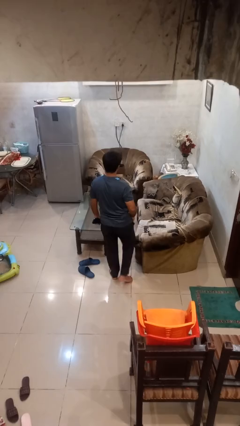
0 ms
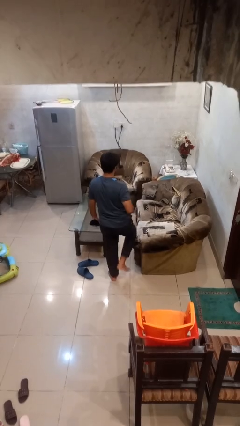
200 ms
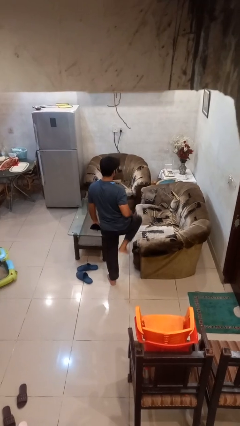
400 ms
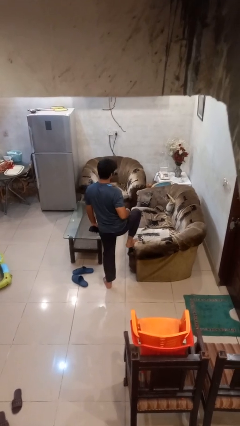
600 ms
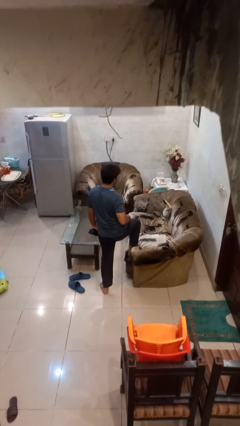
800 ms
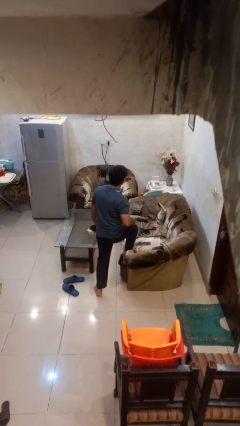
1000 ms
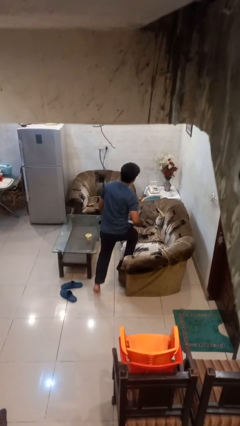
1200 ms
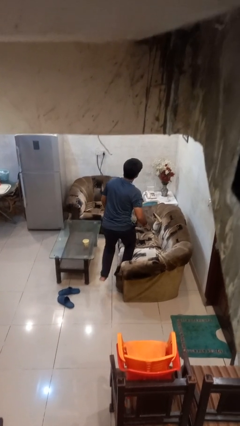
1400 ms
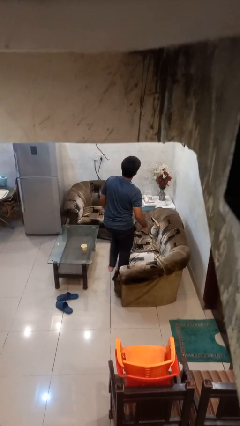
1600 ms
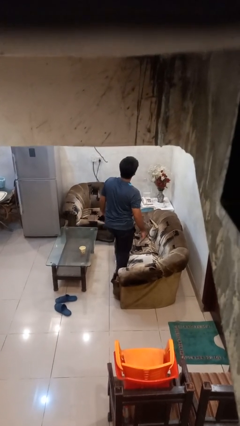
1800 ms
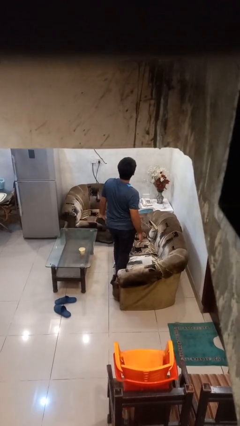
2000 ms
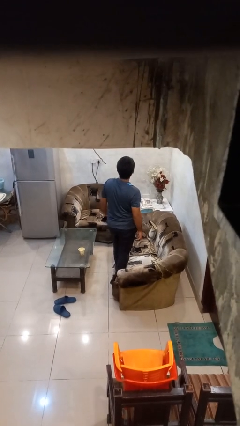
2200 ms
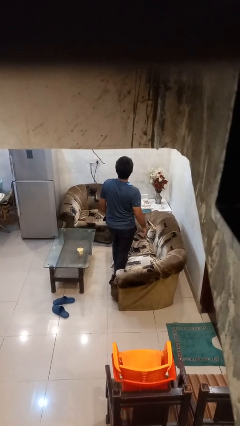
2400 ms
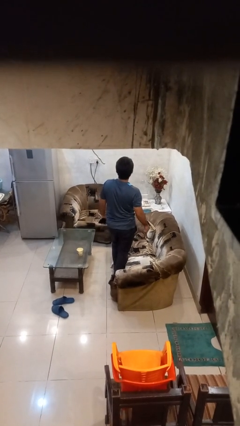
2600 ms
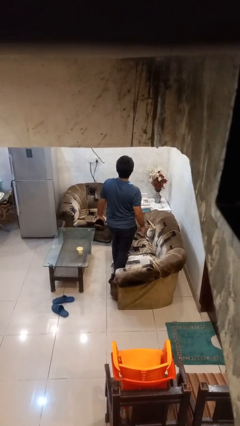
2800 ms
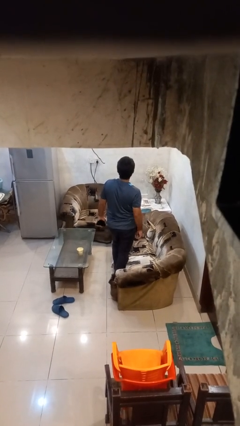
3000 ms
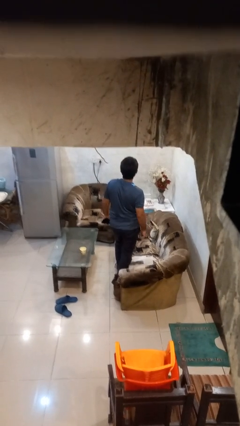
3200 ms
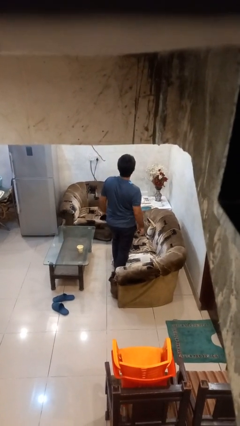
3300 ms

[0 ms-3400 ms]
person climbs on couch

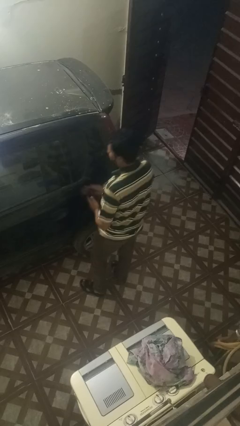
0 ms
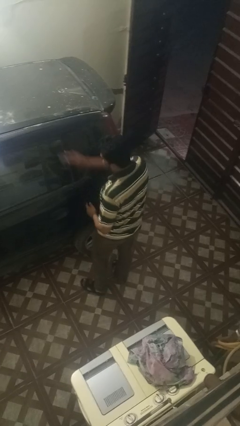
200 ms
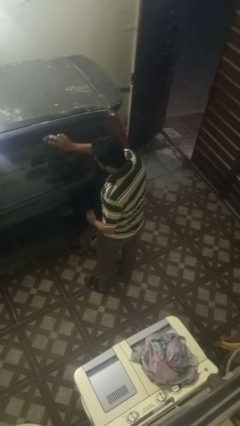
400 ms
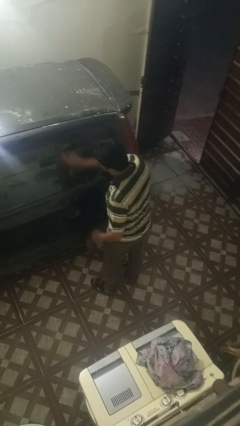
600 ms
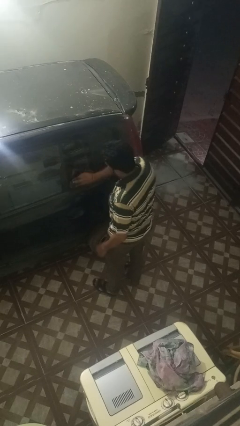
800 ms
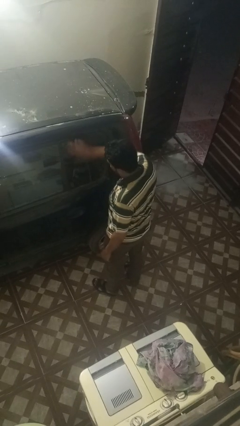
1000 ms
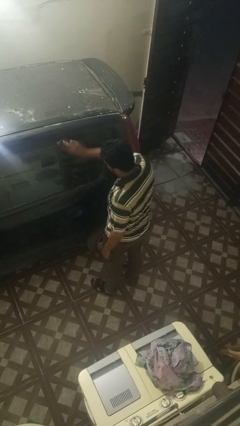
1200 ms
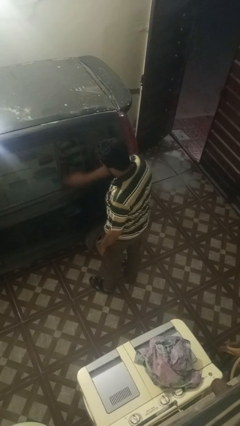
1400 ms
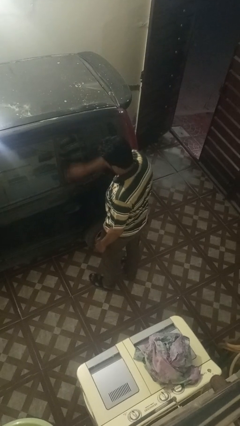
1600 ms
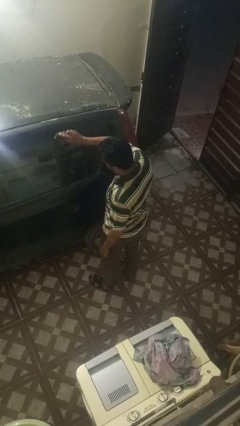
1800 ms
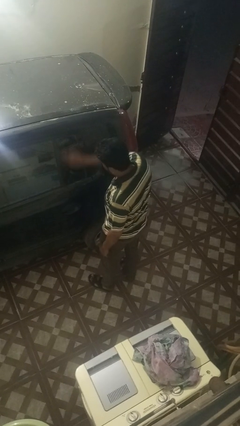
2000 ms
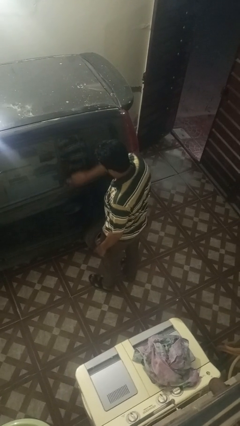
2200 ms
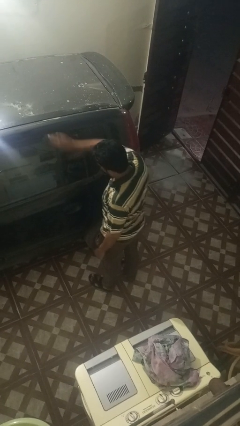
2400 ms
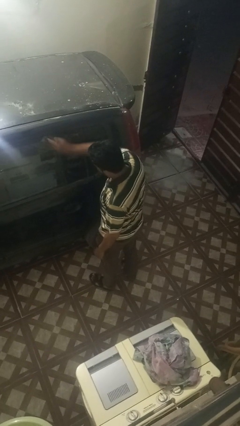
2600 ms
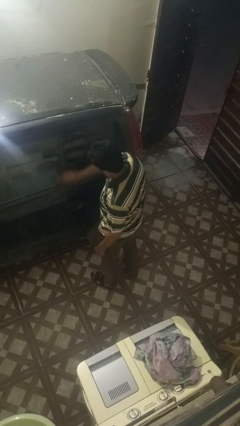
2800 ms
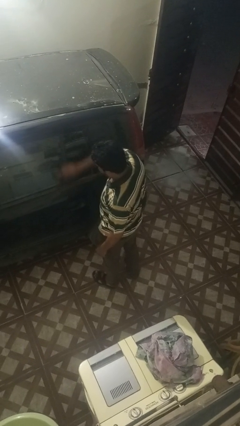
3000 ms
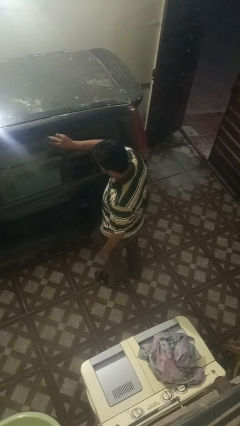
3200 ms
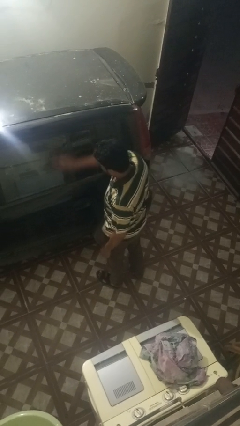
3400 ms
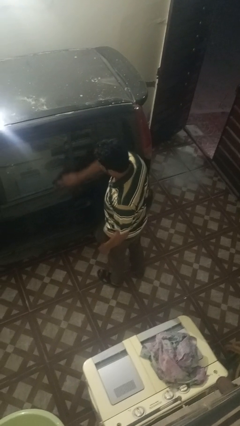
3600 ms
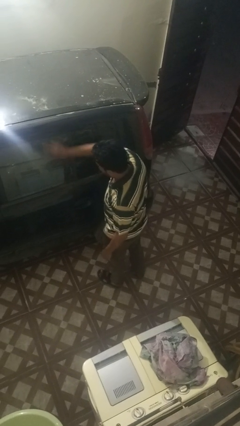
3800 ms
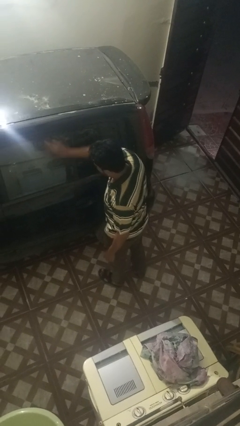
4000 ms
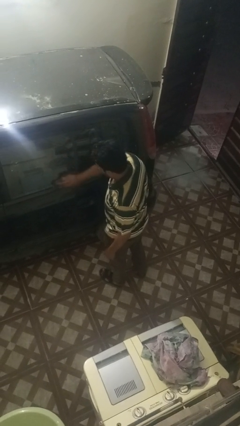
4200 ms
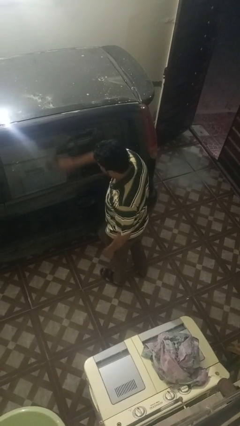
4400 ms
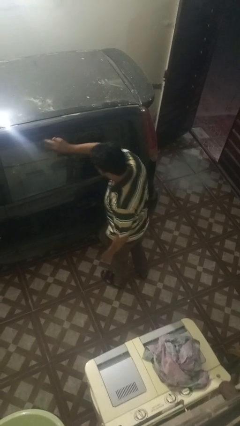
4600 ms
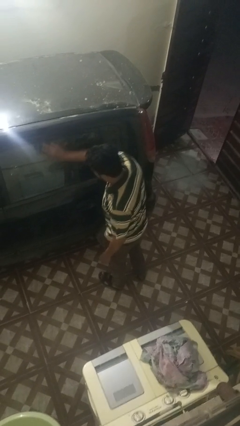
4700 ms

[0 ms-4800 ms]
person polishes car with rag

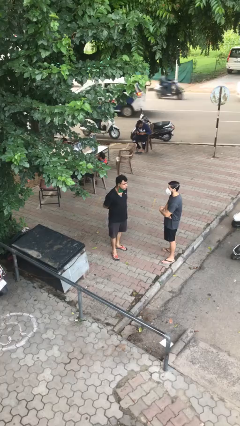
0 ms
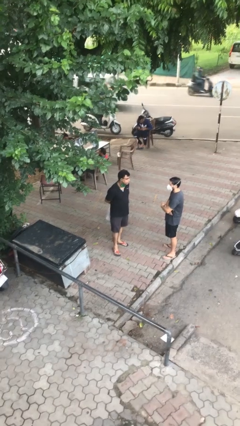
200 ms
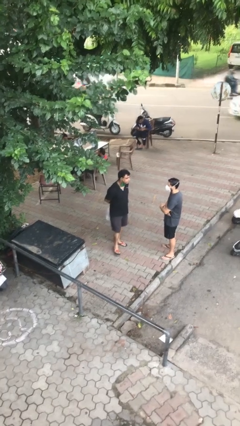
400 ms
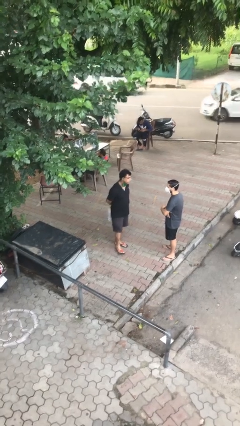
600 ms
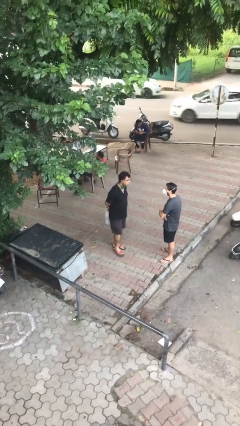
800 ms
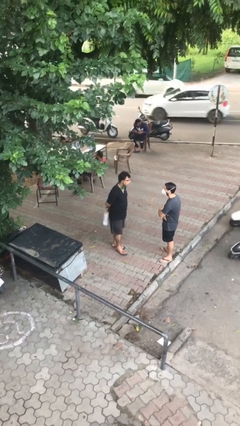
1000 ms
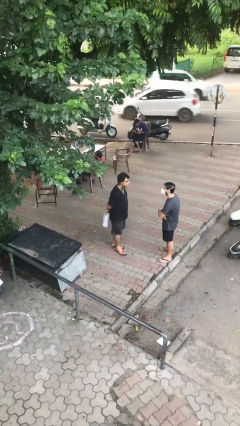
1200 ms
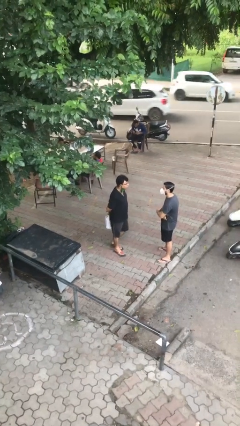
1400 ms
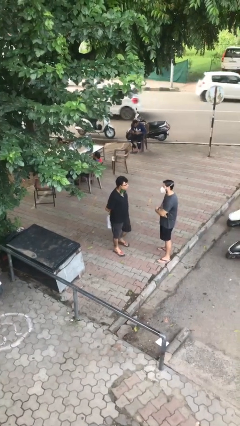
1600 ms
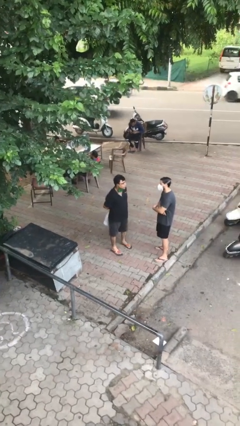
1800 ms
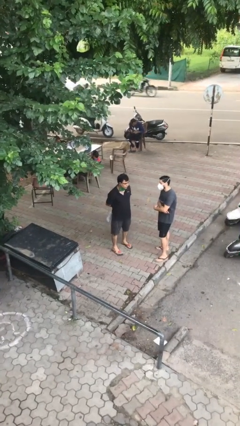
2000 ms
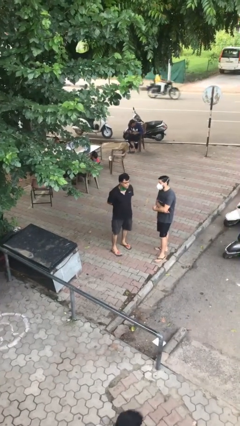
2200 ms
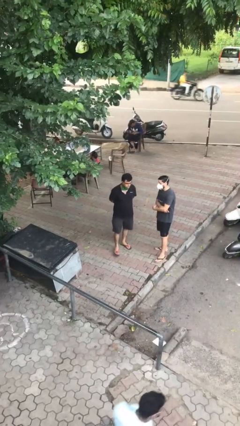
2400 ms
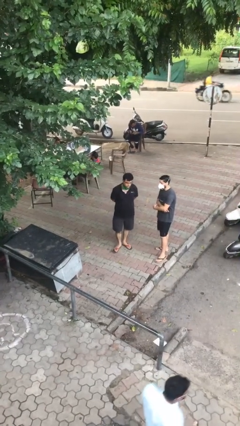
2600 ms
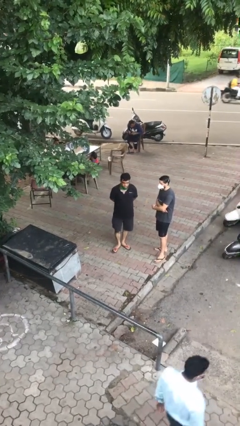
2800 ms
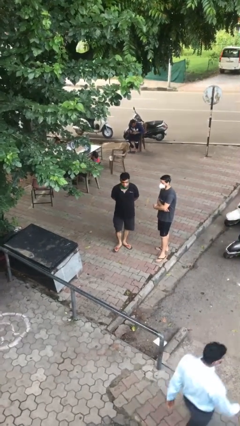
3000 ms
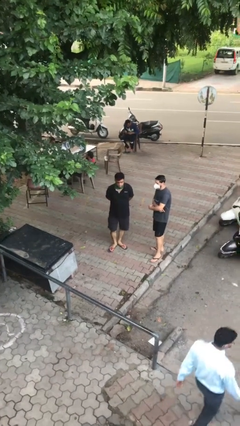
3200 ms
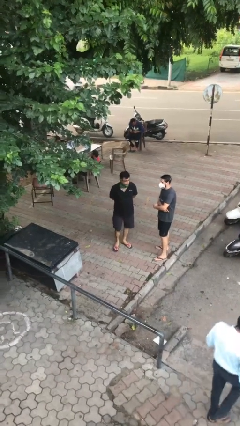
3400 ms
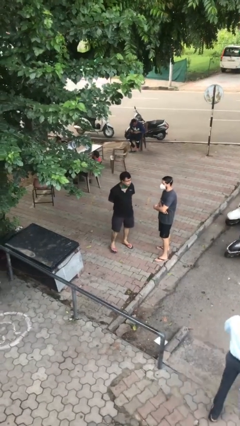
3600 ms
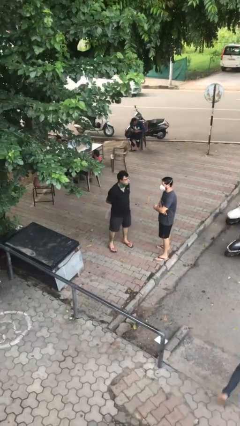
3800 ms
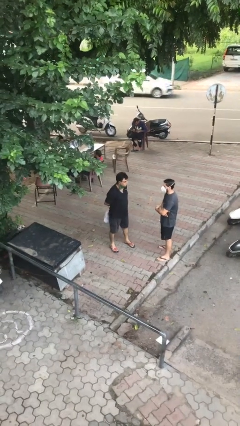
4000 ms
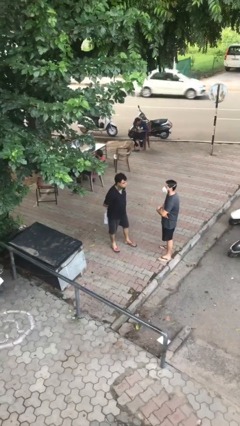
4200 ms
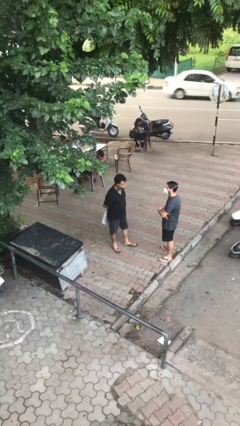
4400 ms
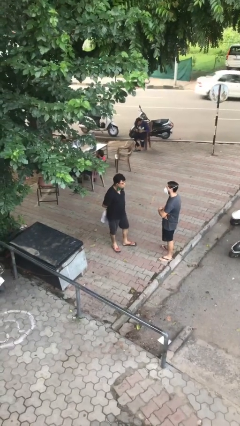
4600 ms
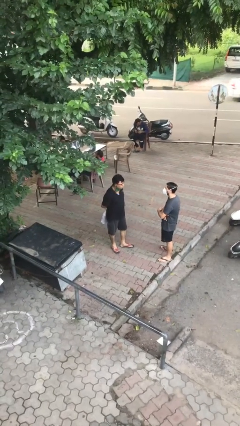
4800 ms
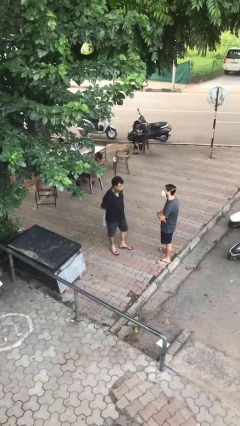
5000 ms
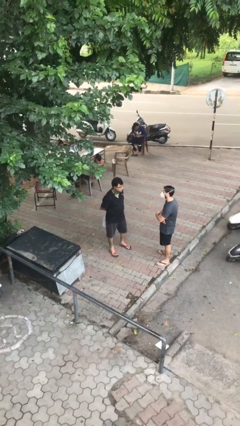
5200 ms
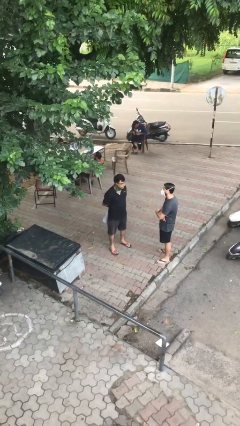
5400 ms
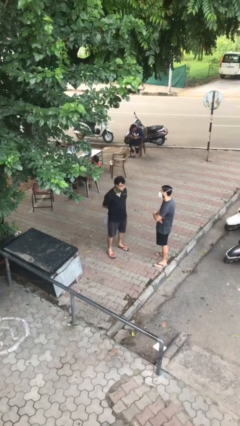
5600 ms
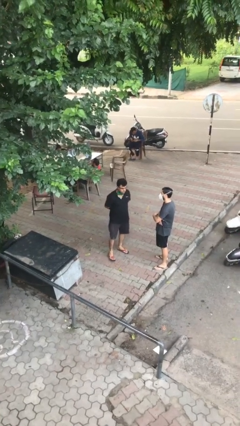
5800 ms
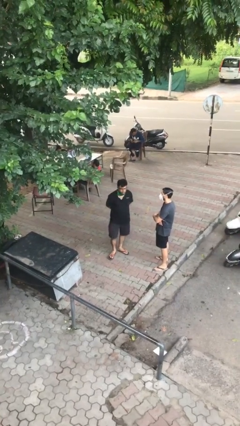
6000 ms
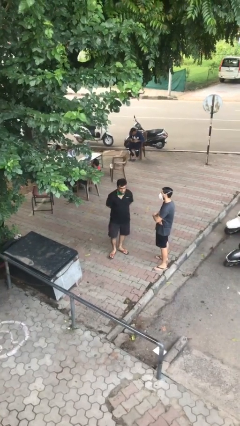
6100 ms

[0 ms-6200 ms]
person talks to person

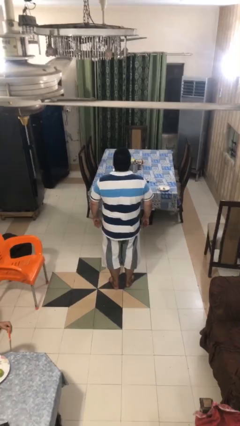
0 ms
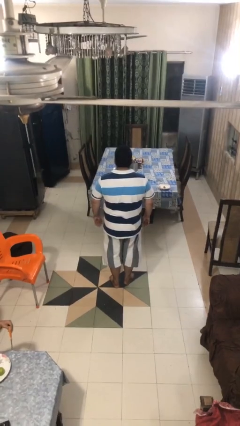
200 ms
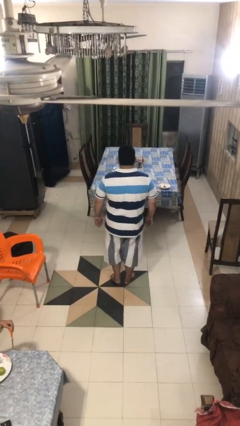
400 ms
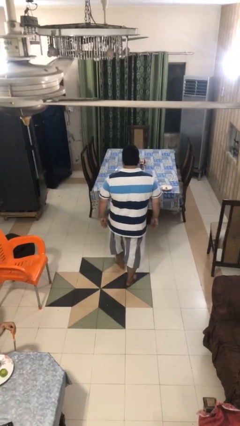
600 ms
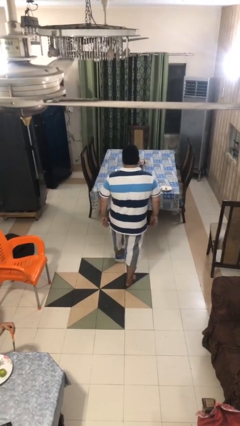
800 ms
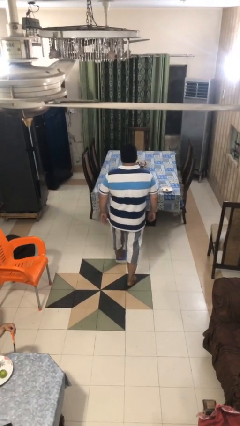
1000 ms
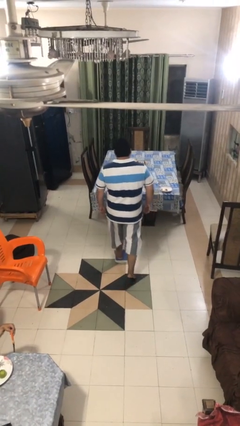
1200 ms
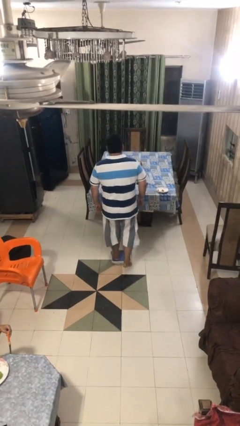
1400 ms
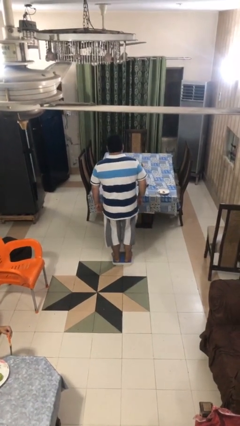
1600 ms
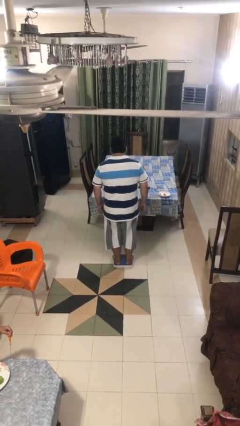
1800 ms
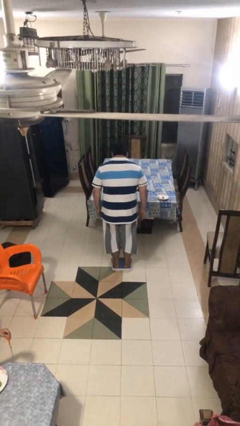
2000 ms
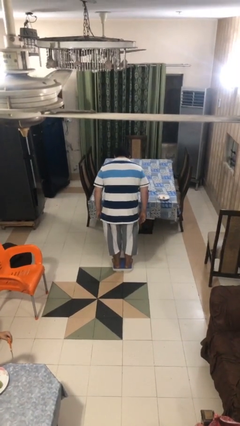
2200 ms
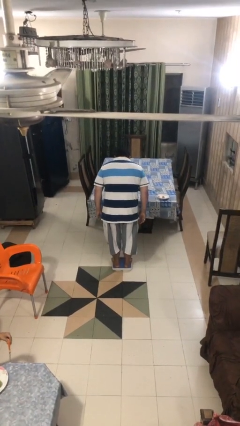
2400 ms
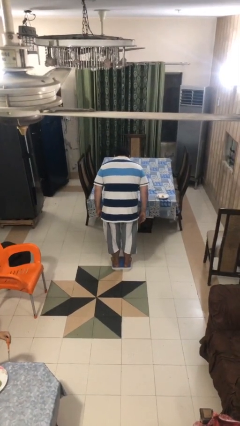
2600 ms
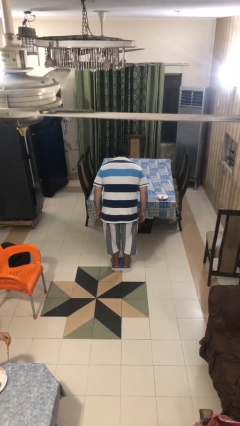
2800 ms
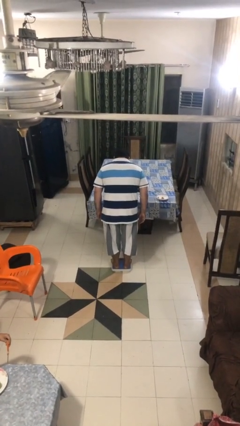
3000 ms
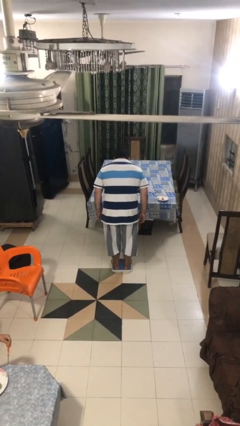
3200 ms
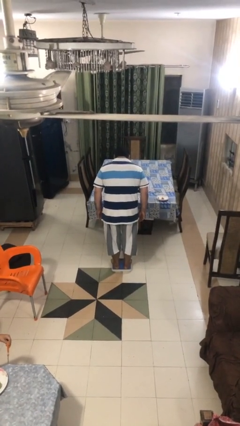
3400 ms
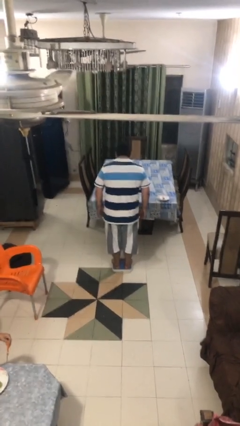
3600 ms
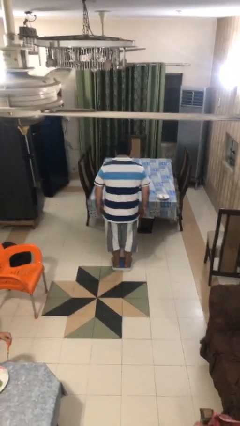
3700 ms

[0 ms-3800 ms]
person uses bodyweight scale
